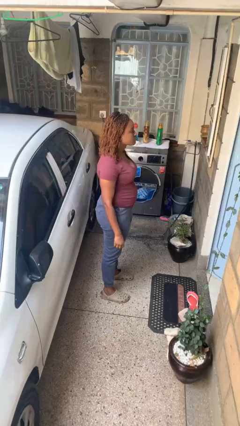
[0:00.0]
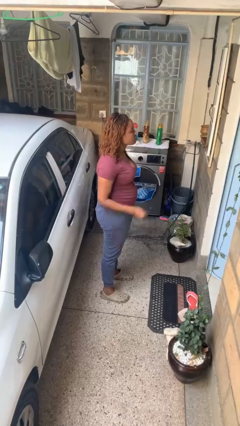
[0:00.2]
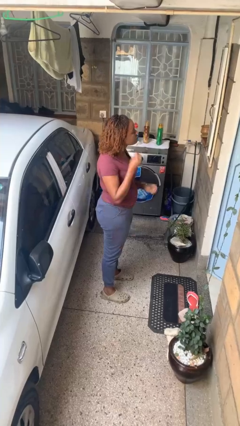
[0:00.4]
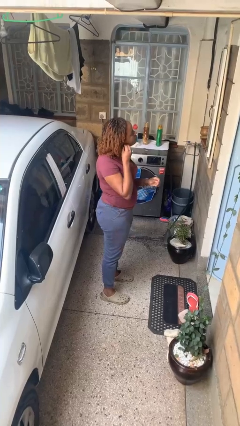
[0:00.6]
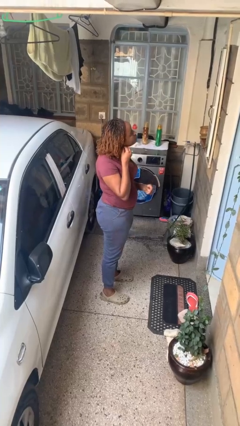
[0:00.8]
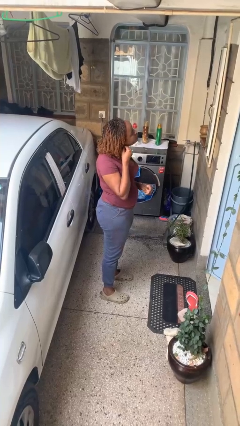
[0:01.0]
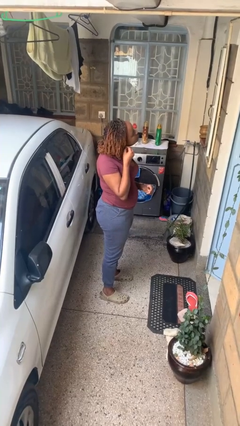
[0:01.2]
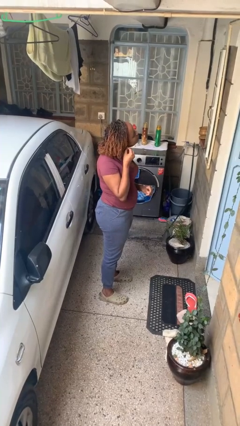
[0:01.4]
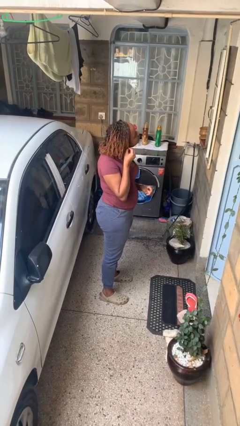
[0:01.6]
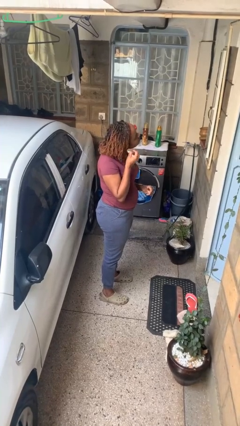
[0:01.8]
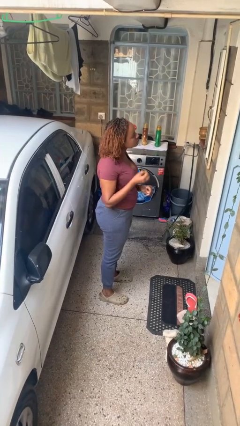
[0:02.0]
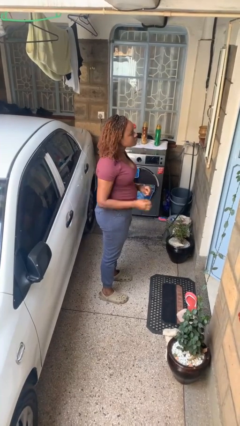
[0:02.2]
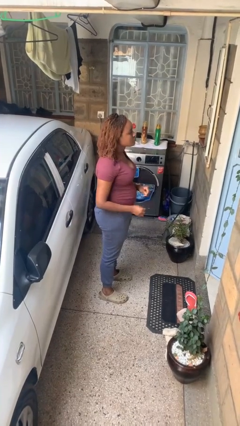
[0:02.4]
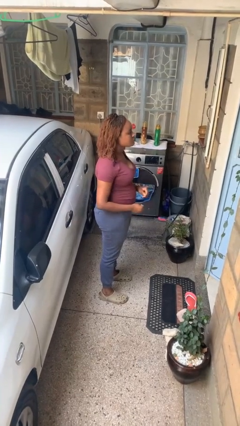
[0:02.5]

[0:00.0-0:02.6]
person takes off earrings

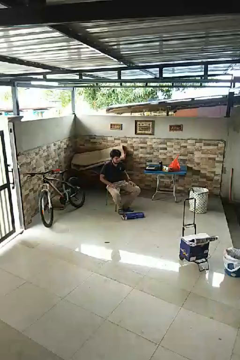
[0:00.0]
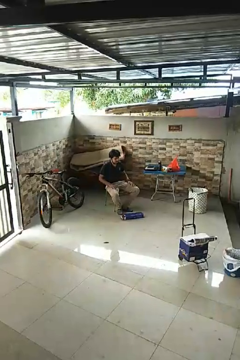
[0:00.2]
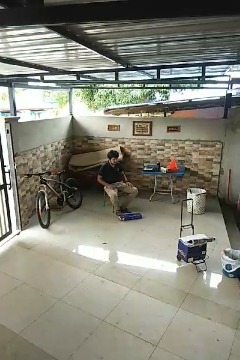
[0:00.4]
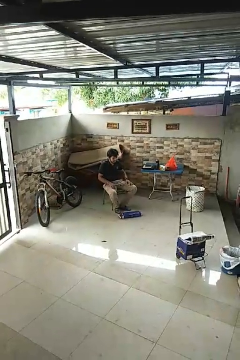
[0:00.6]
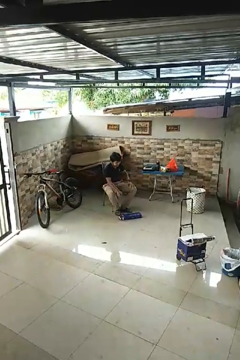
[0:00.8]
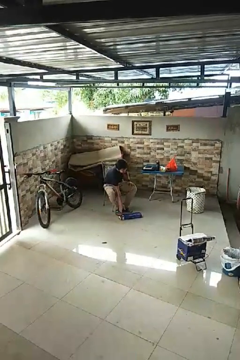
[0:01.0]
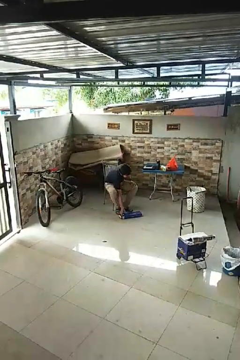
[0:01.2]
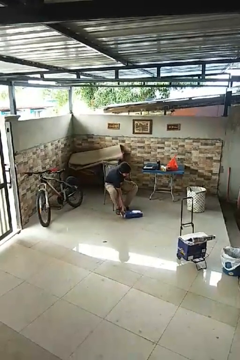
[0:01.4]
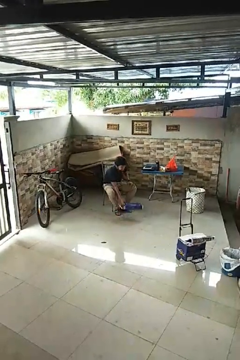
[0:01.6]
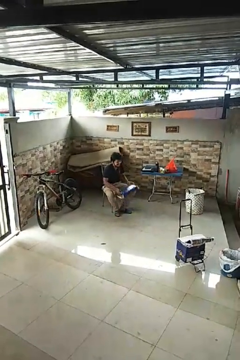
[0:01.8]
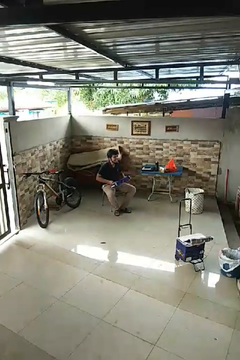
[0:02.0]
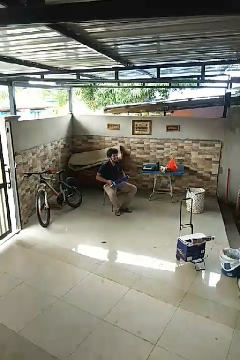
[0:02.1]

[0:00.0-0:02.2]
person picks up object from floor

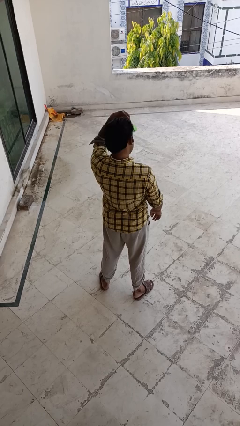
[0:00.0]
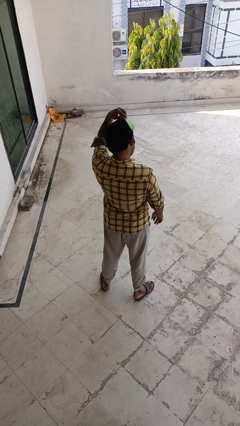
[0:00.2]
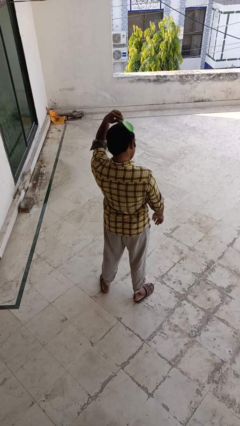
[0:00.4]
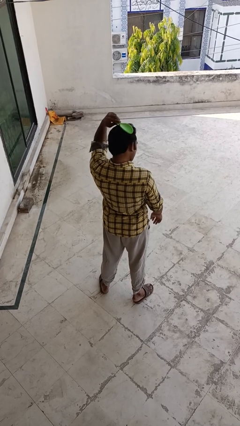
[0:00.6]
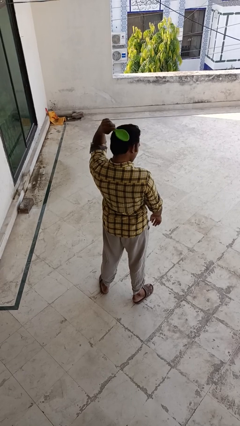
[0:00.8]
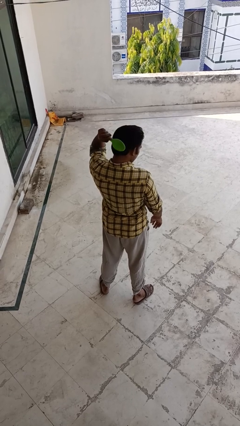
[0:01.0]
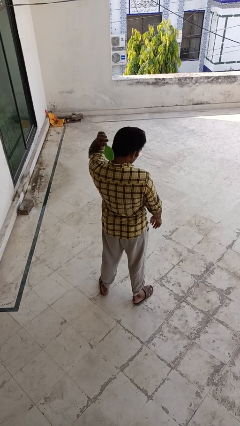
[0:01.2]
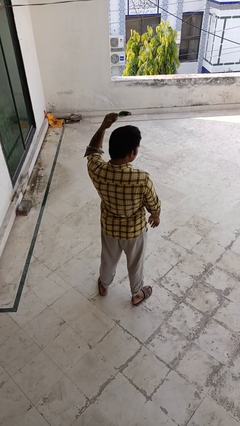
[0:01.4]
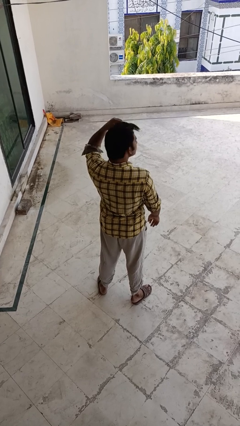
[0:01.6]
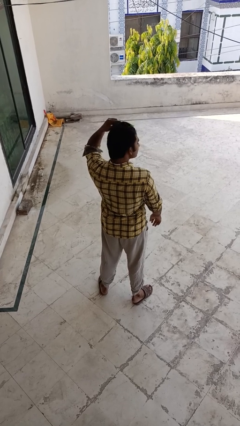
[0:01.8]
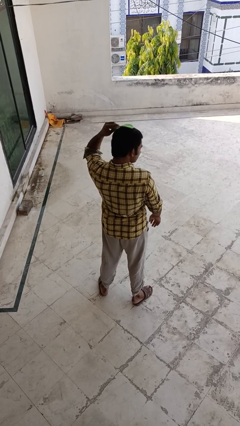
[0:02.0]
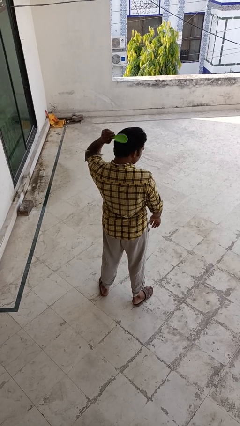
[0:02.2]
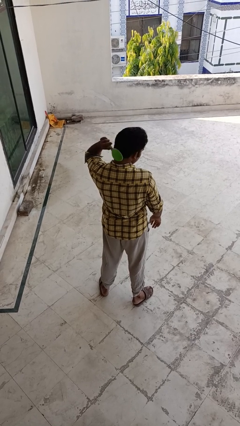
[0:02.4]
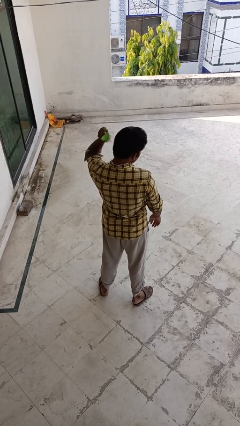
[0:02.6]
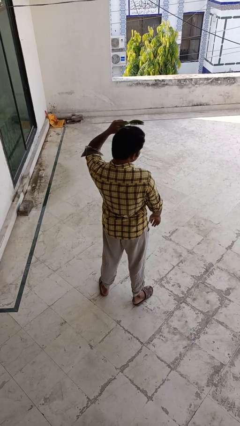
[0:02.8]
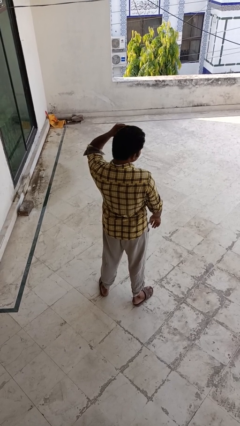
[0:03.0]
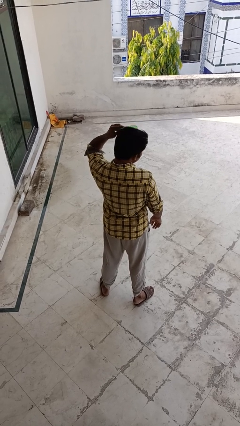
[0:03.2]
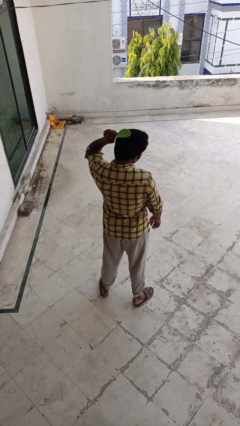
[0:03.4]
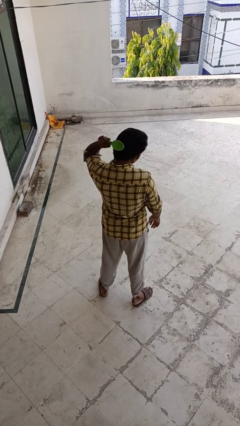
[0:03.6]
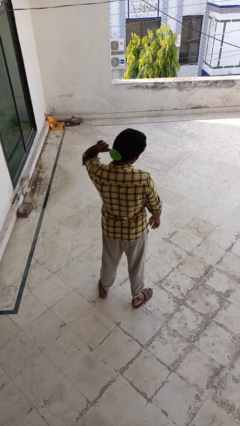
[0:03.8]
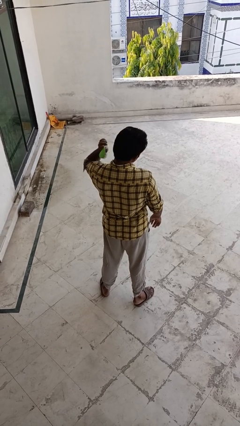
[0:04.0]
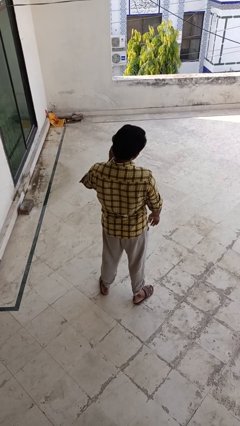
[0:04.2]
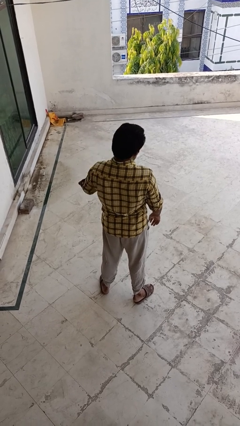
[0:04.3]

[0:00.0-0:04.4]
person brushes hair

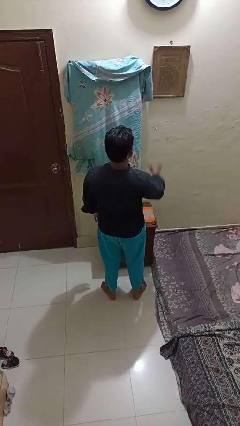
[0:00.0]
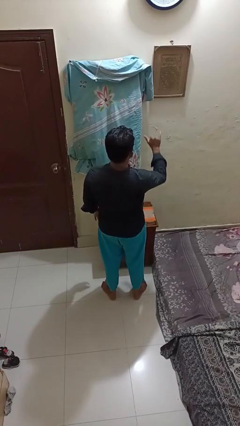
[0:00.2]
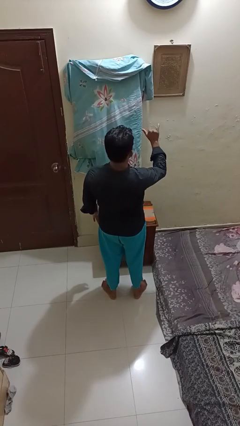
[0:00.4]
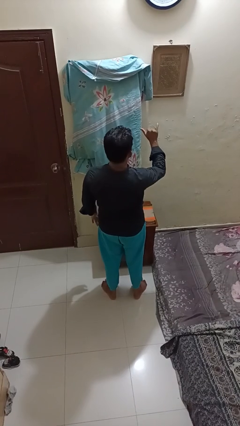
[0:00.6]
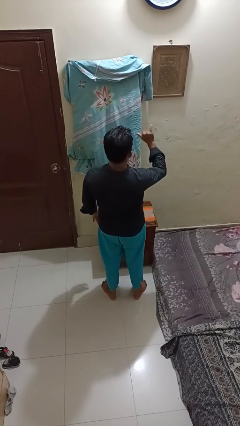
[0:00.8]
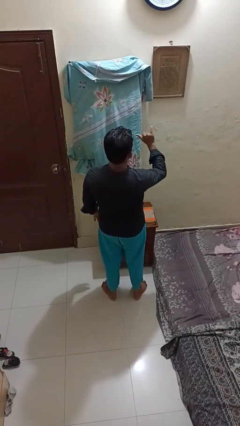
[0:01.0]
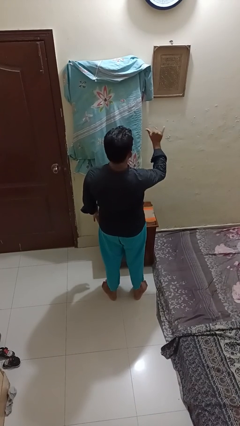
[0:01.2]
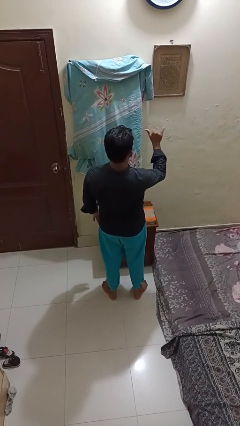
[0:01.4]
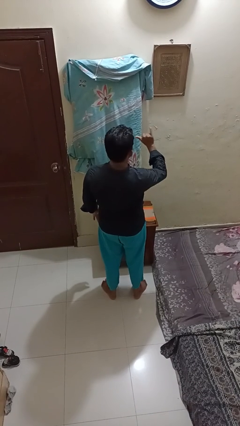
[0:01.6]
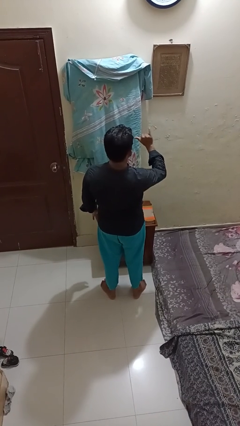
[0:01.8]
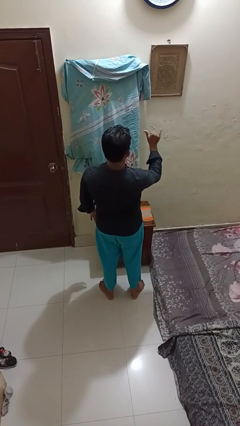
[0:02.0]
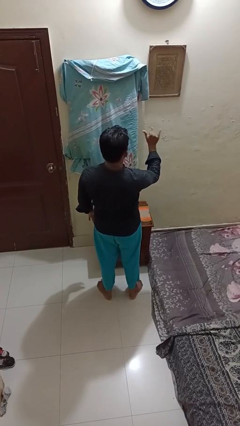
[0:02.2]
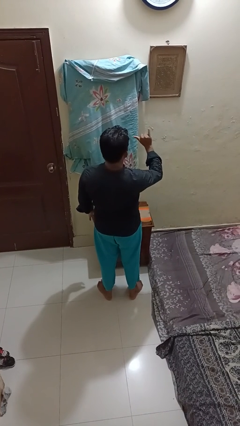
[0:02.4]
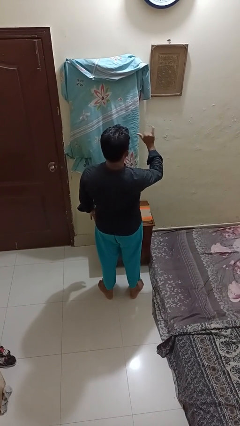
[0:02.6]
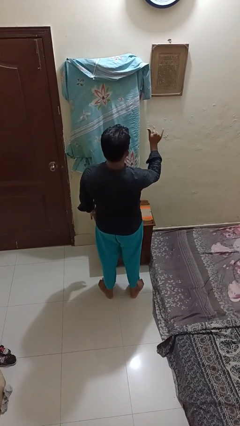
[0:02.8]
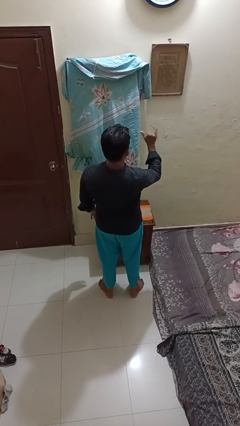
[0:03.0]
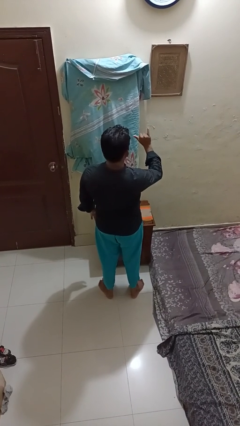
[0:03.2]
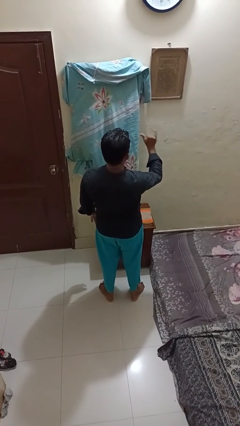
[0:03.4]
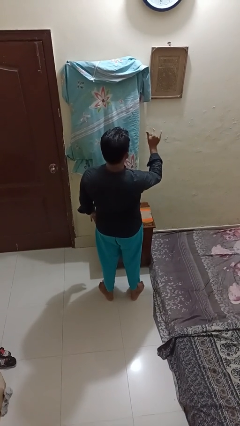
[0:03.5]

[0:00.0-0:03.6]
person gestures hang loose

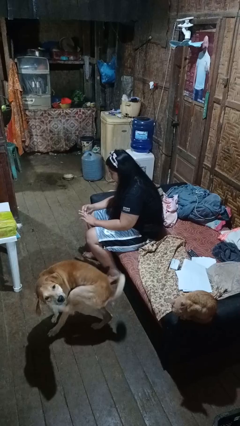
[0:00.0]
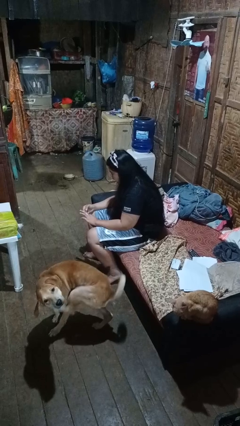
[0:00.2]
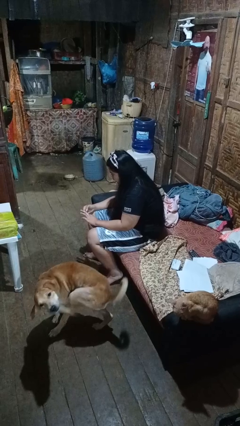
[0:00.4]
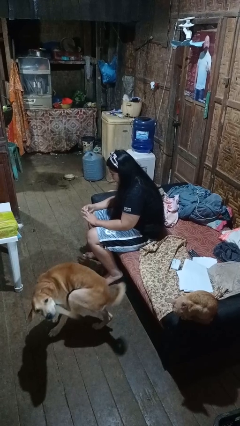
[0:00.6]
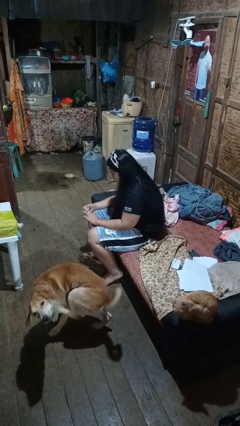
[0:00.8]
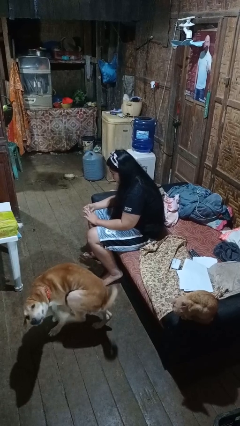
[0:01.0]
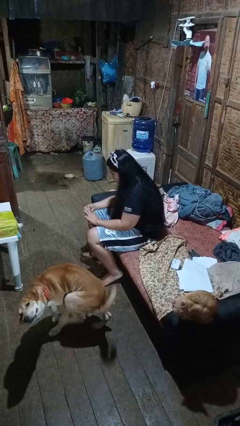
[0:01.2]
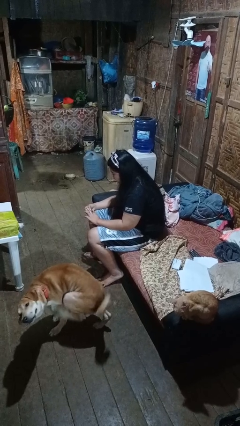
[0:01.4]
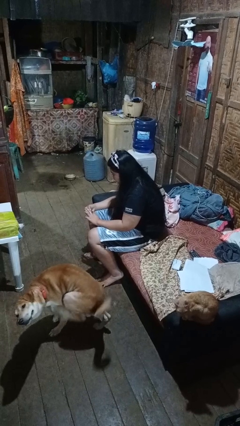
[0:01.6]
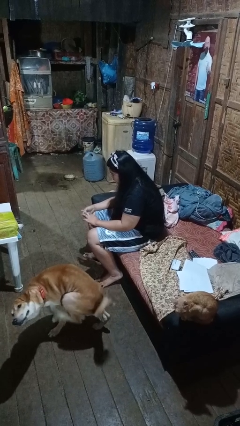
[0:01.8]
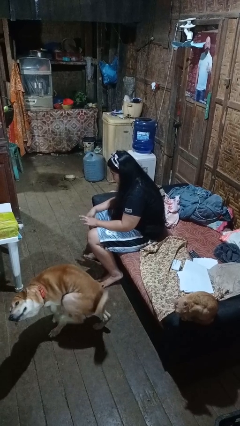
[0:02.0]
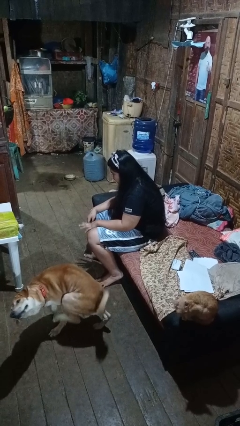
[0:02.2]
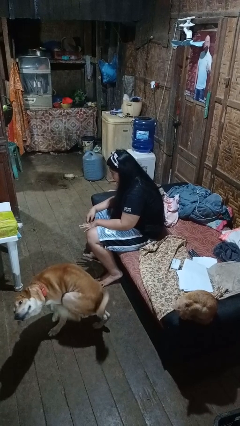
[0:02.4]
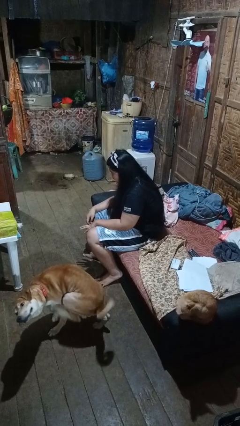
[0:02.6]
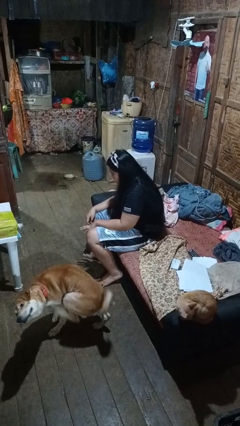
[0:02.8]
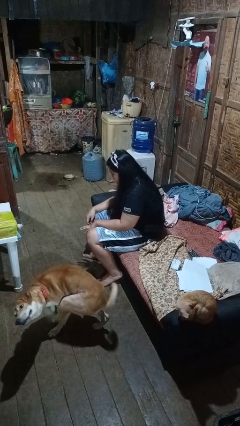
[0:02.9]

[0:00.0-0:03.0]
person clips fingernails

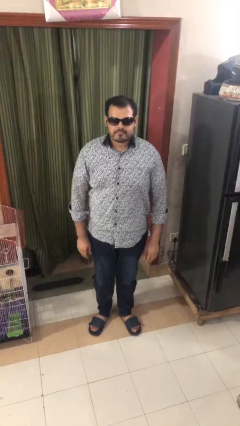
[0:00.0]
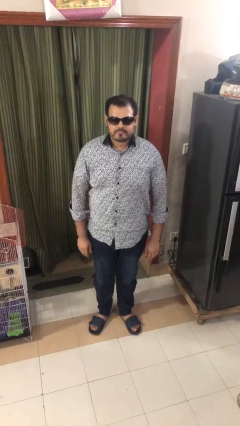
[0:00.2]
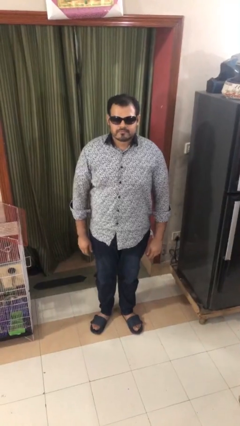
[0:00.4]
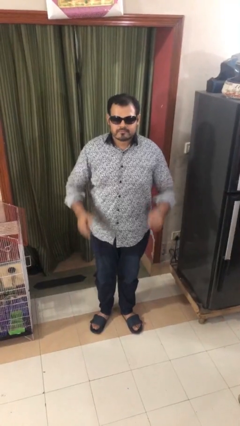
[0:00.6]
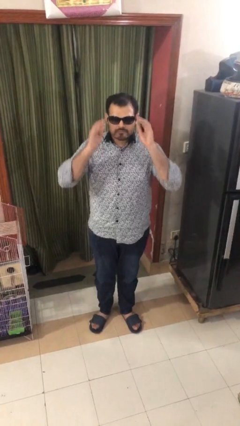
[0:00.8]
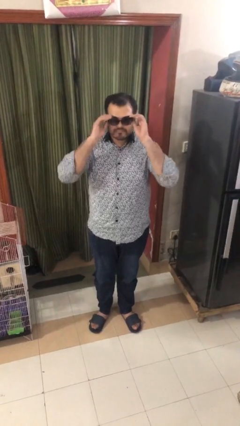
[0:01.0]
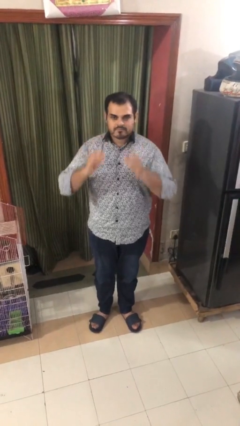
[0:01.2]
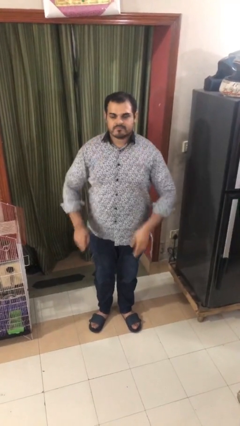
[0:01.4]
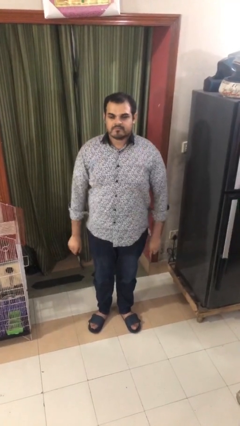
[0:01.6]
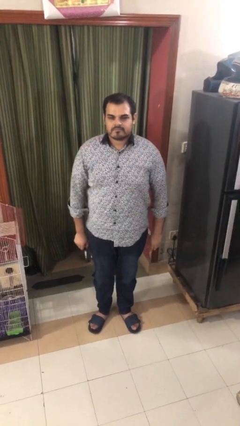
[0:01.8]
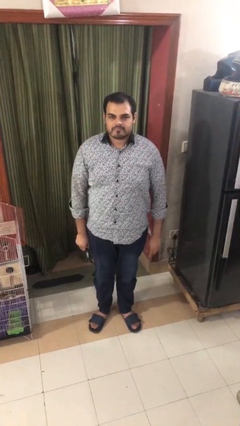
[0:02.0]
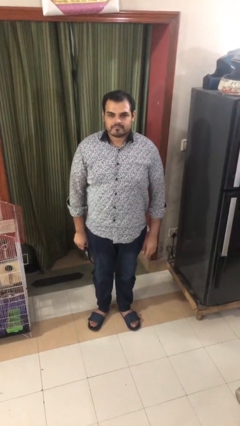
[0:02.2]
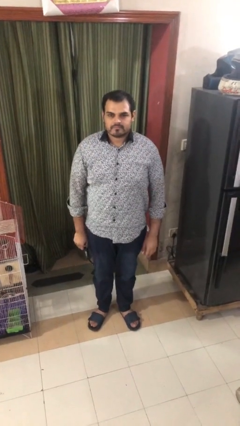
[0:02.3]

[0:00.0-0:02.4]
person takes off sunglasses
